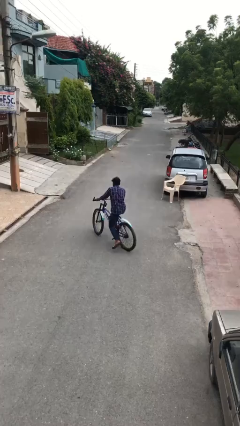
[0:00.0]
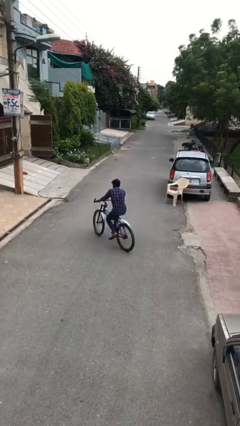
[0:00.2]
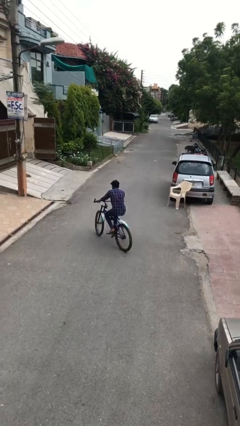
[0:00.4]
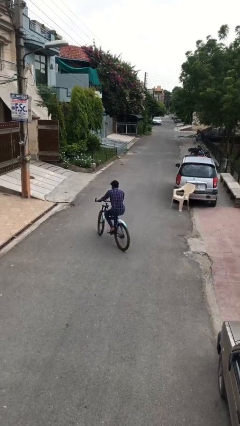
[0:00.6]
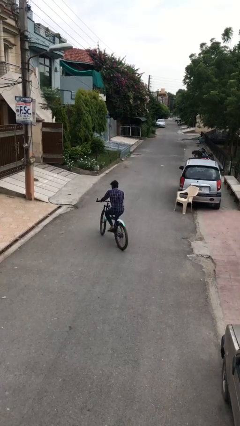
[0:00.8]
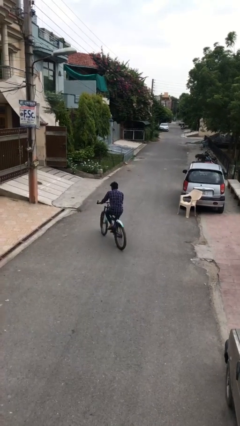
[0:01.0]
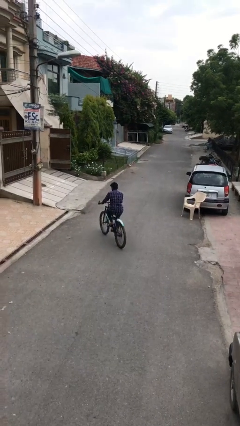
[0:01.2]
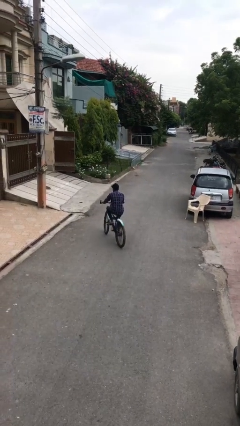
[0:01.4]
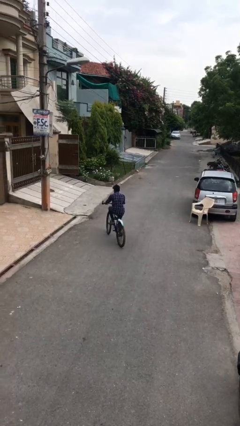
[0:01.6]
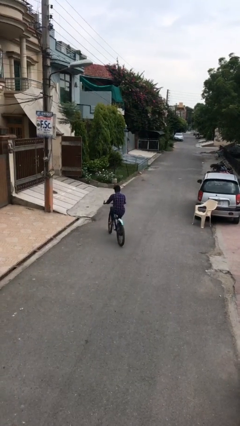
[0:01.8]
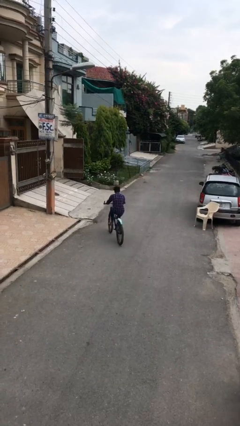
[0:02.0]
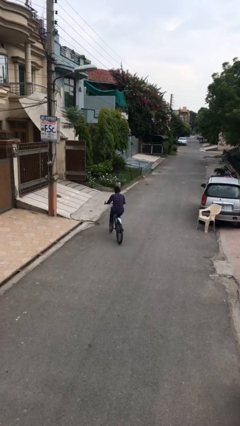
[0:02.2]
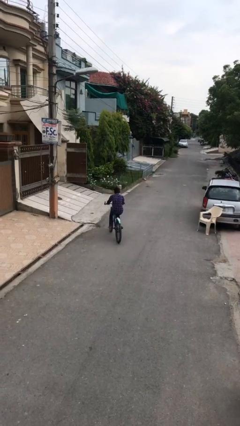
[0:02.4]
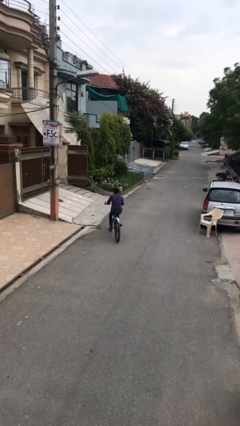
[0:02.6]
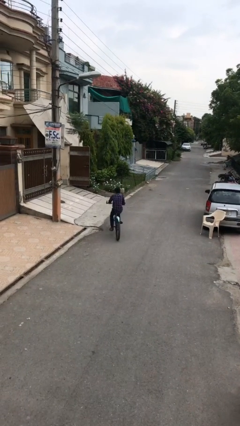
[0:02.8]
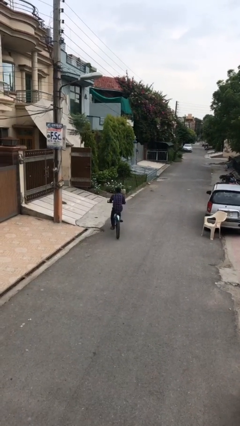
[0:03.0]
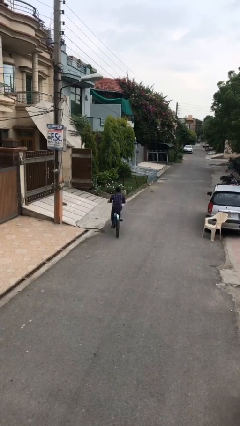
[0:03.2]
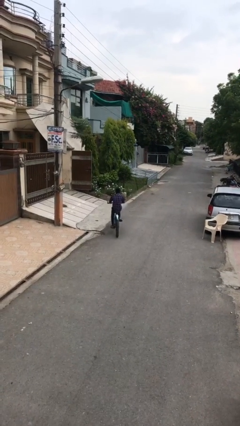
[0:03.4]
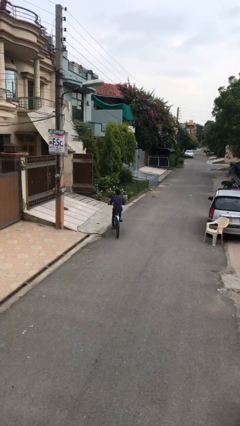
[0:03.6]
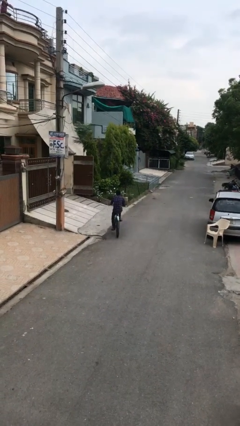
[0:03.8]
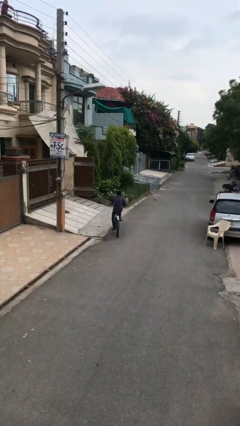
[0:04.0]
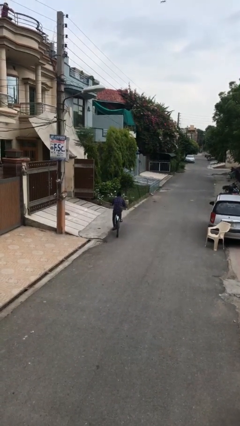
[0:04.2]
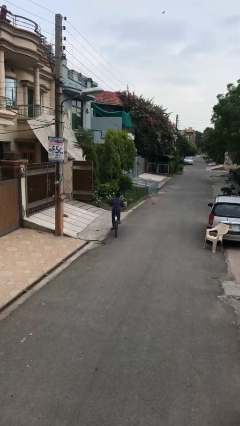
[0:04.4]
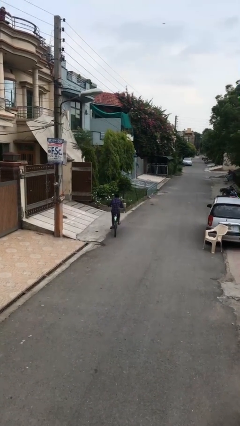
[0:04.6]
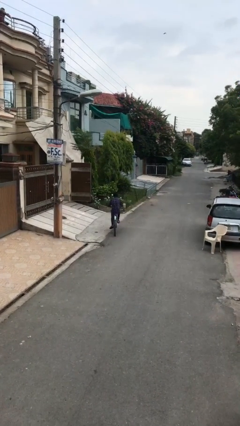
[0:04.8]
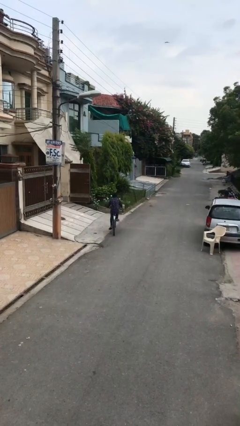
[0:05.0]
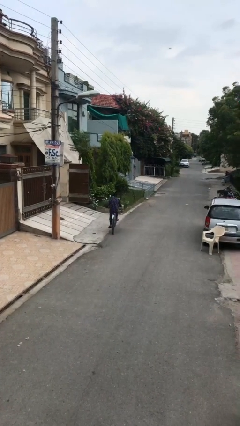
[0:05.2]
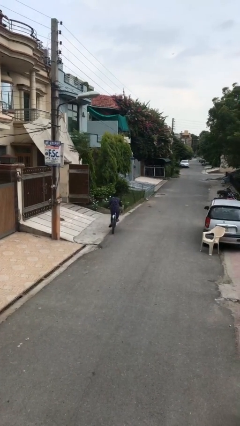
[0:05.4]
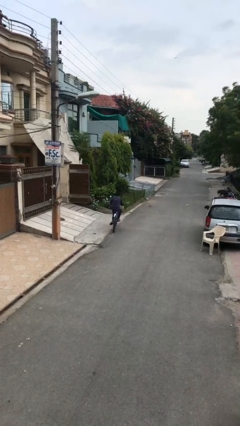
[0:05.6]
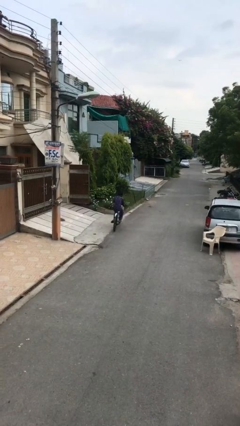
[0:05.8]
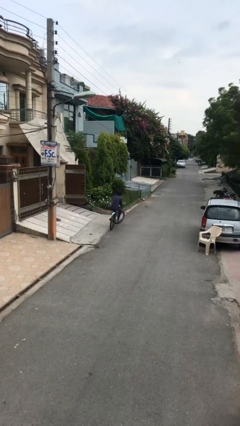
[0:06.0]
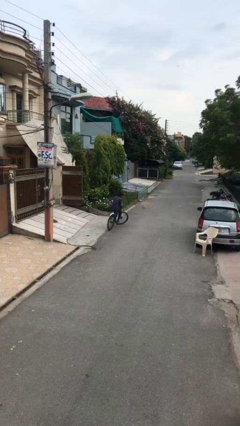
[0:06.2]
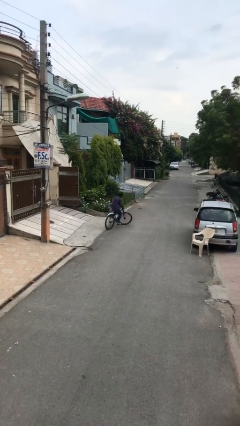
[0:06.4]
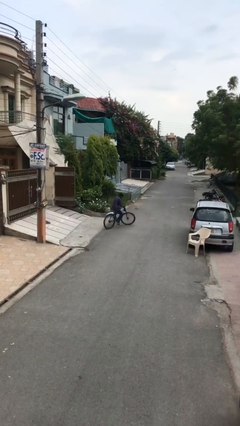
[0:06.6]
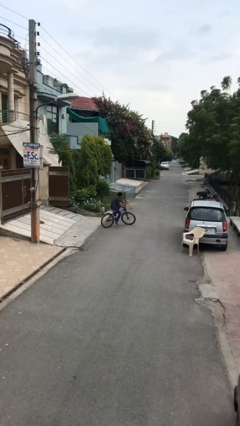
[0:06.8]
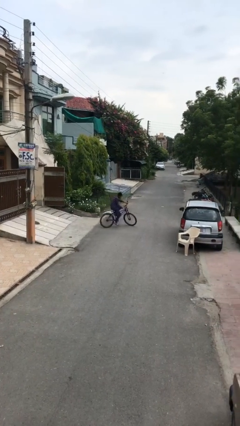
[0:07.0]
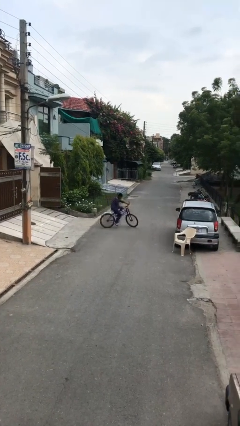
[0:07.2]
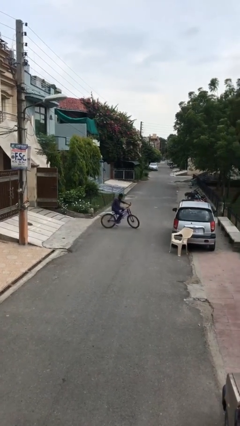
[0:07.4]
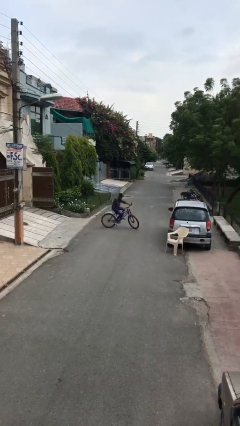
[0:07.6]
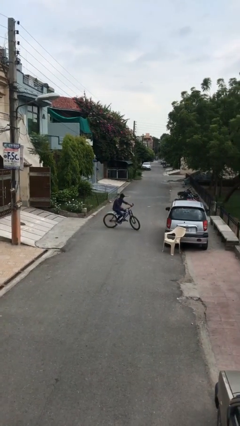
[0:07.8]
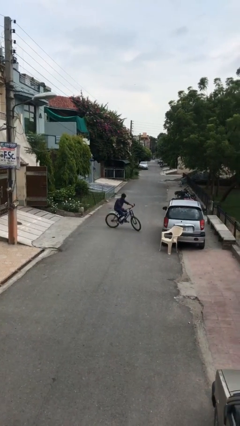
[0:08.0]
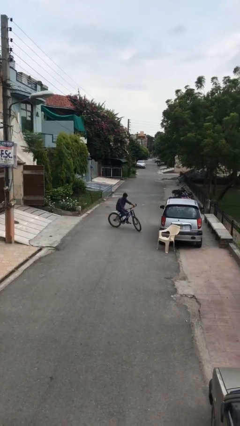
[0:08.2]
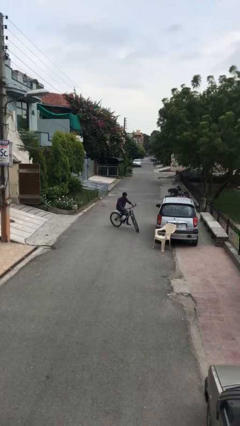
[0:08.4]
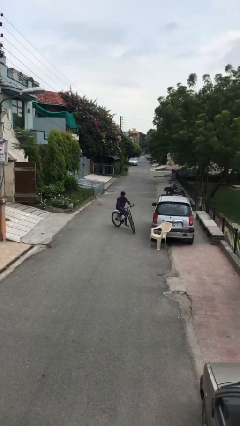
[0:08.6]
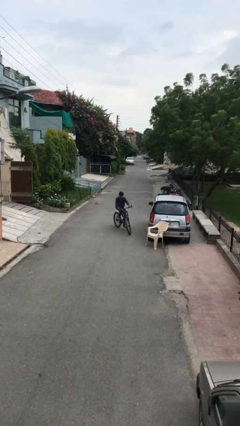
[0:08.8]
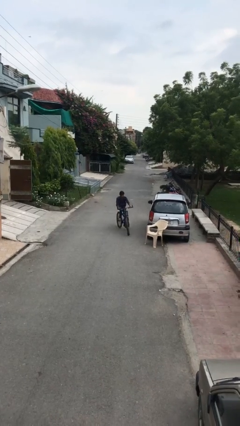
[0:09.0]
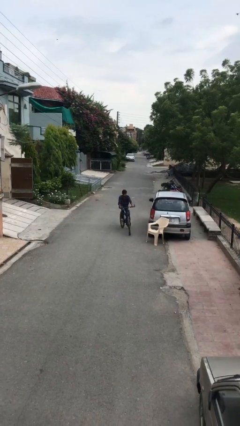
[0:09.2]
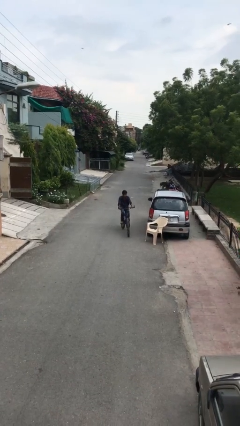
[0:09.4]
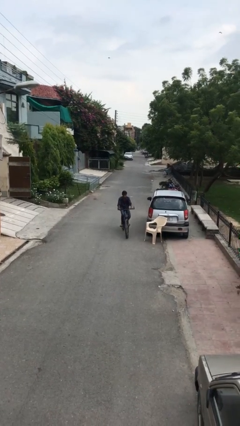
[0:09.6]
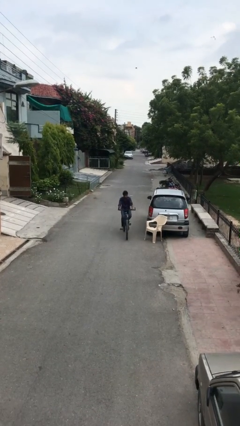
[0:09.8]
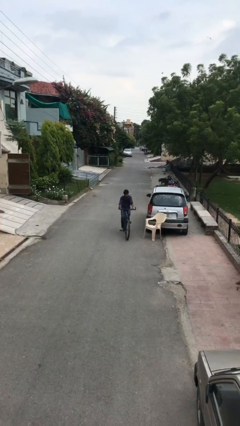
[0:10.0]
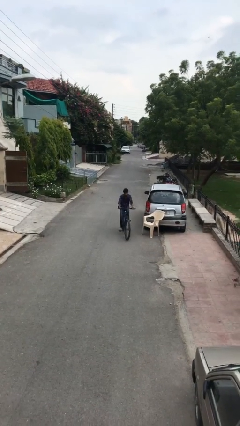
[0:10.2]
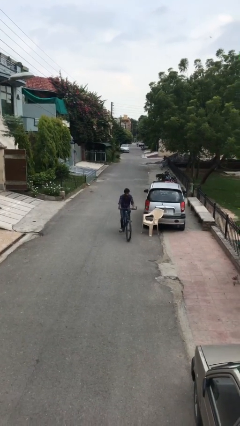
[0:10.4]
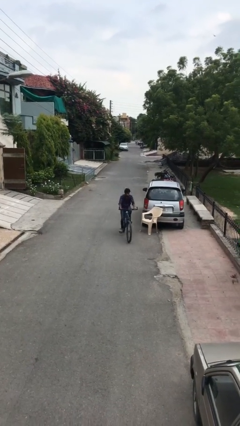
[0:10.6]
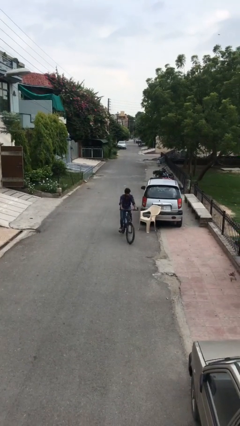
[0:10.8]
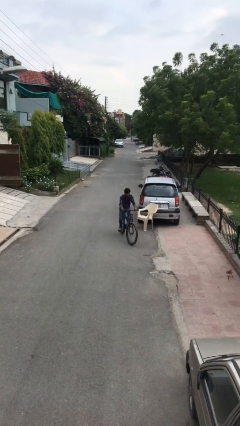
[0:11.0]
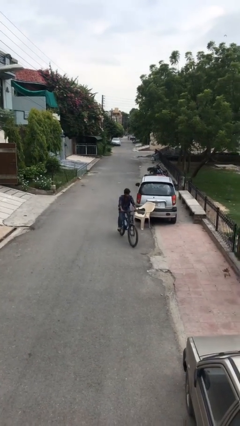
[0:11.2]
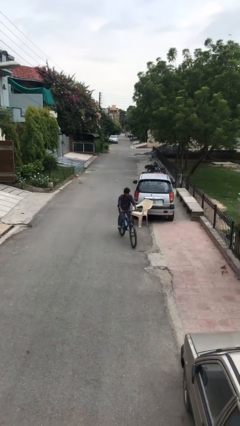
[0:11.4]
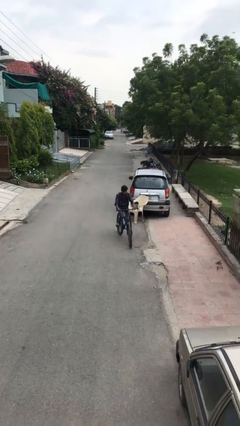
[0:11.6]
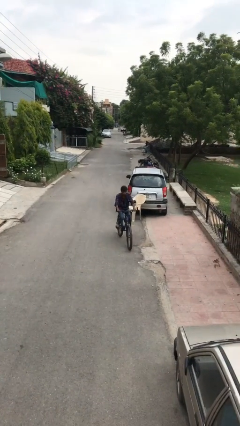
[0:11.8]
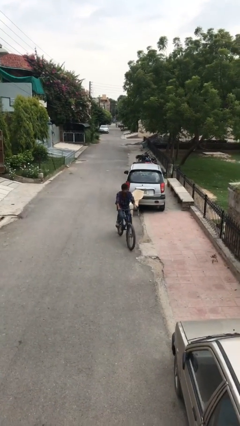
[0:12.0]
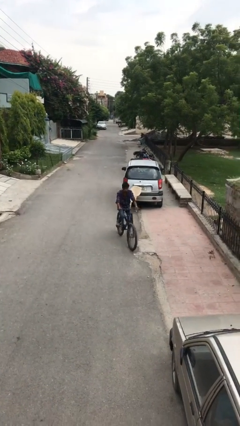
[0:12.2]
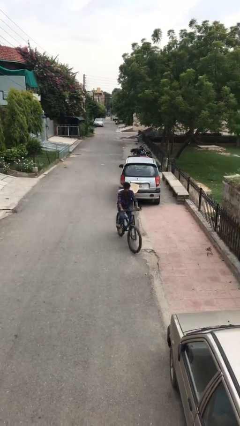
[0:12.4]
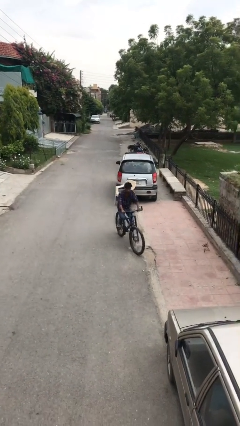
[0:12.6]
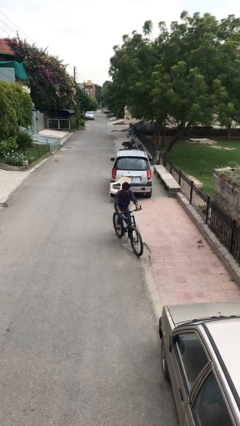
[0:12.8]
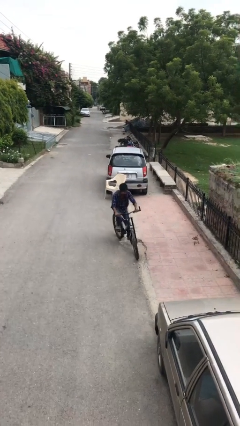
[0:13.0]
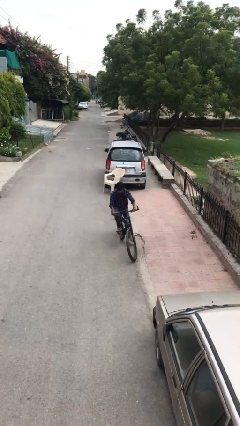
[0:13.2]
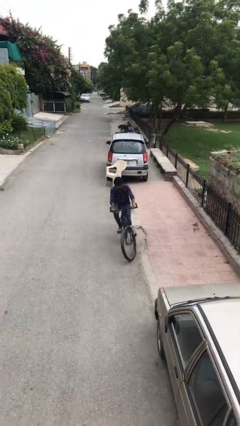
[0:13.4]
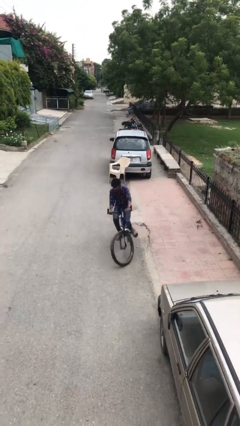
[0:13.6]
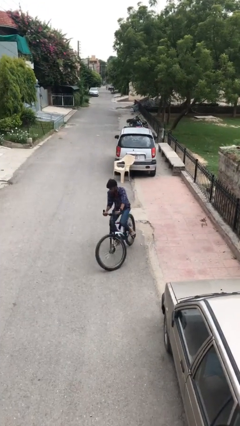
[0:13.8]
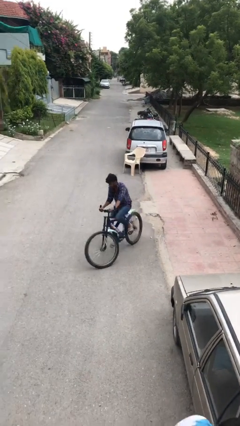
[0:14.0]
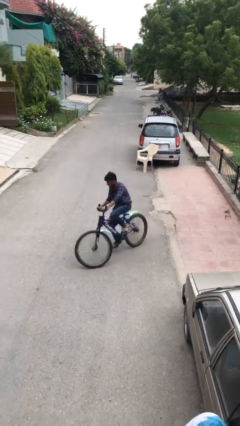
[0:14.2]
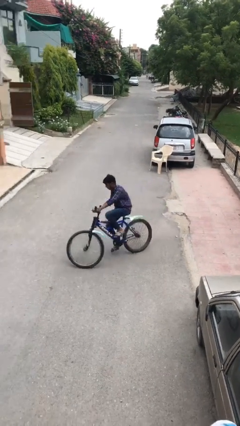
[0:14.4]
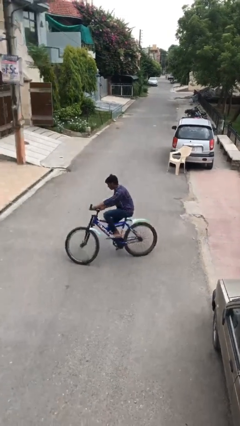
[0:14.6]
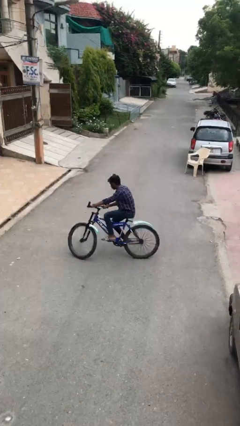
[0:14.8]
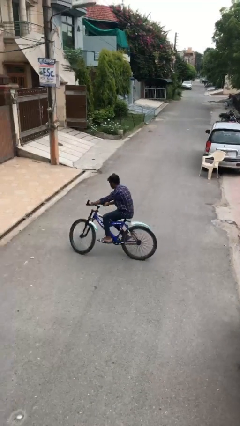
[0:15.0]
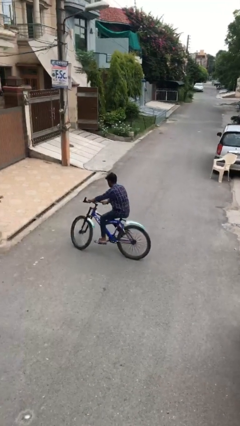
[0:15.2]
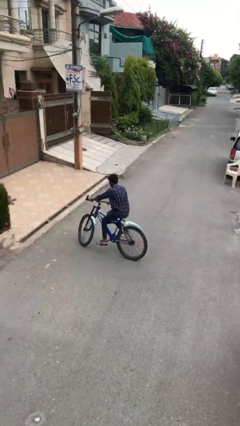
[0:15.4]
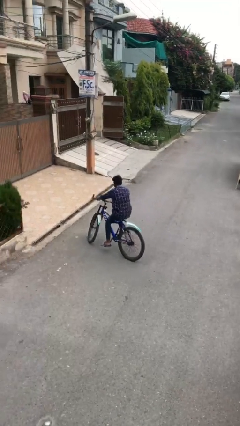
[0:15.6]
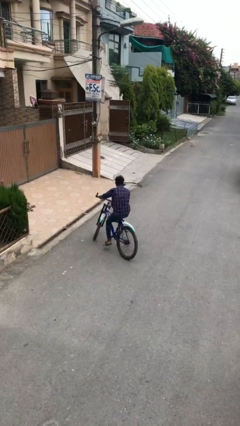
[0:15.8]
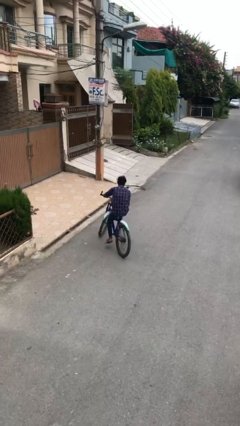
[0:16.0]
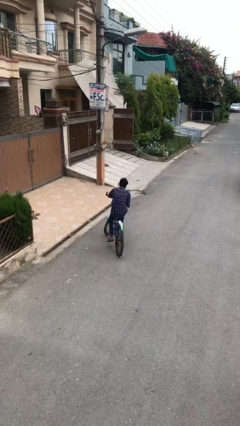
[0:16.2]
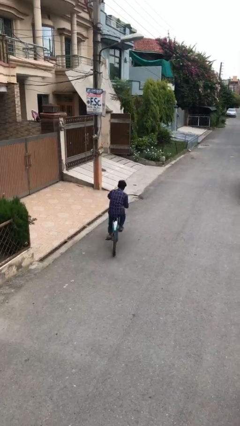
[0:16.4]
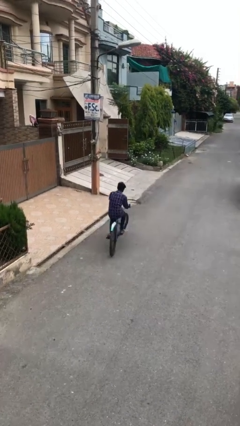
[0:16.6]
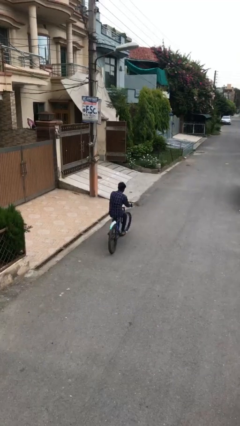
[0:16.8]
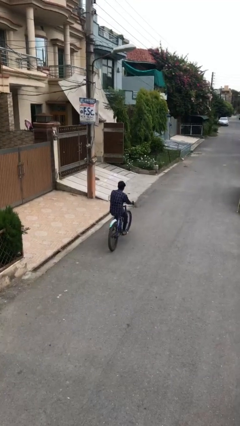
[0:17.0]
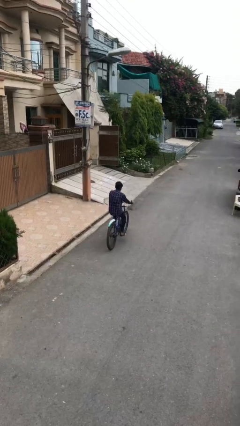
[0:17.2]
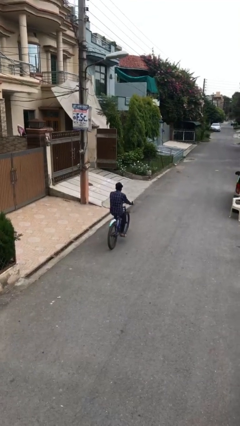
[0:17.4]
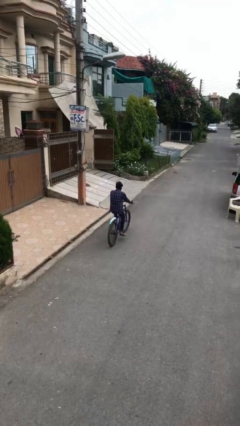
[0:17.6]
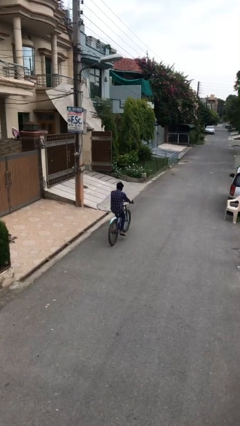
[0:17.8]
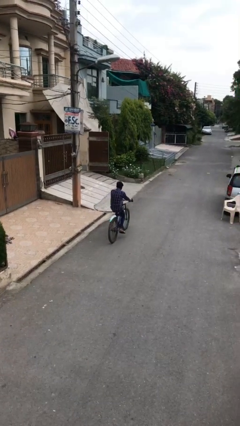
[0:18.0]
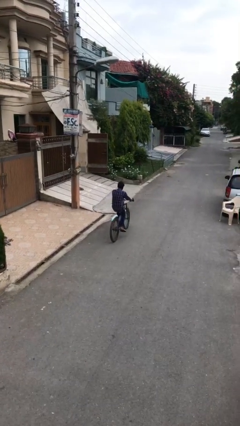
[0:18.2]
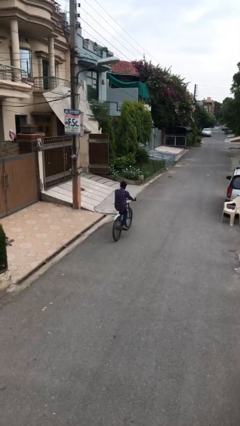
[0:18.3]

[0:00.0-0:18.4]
person rides bicycle

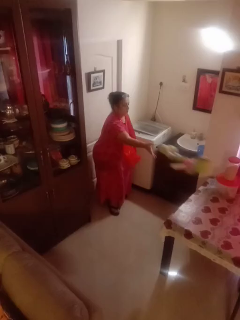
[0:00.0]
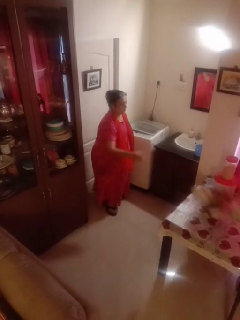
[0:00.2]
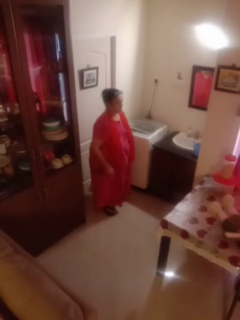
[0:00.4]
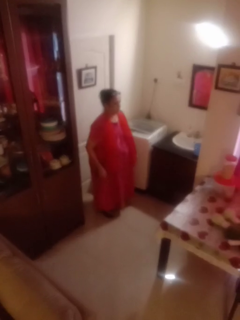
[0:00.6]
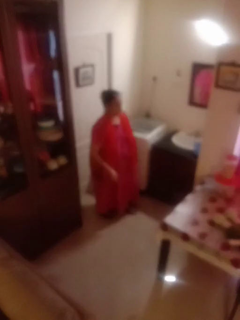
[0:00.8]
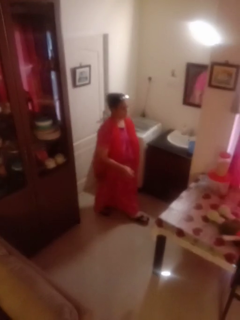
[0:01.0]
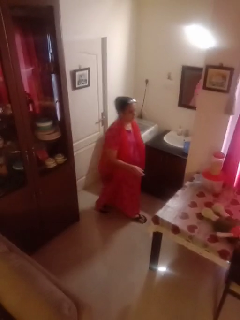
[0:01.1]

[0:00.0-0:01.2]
person throws object on table
